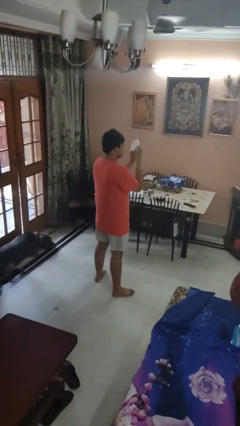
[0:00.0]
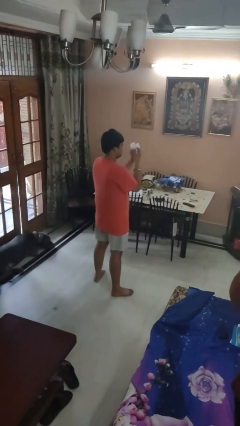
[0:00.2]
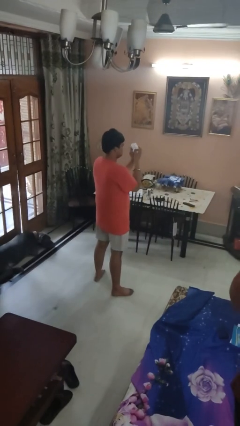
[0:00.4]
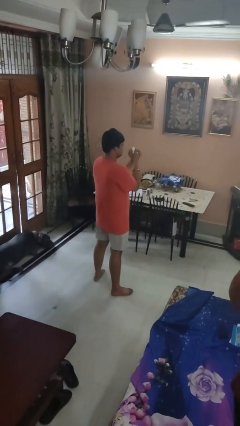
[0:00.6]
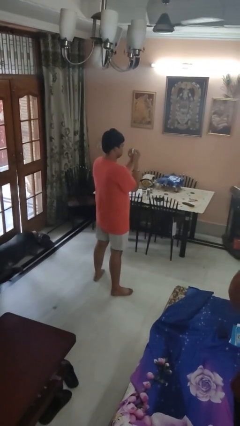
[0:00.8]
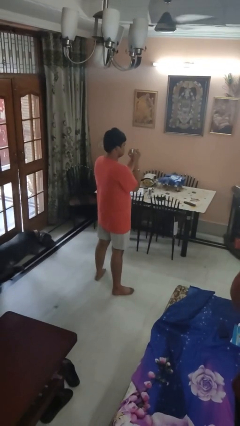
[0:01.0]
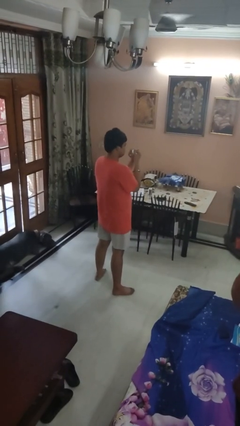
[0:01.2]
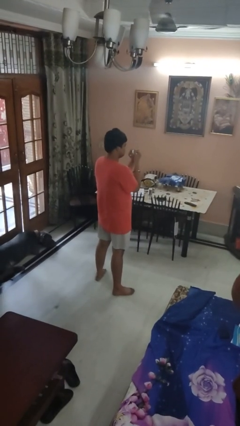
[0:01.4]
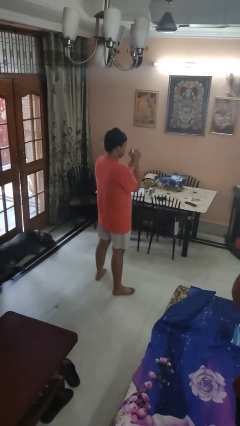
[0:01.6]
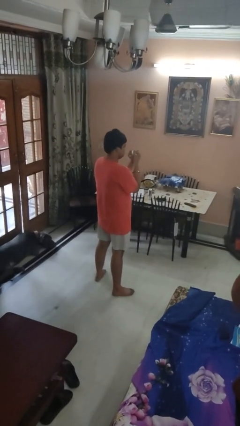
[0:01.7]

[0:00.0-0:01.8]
person crumples paper

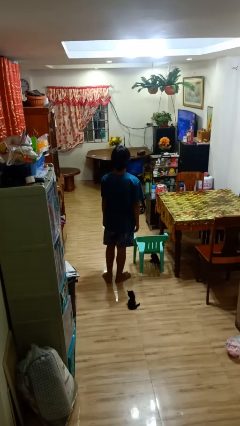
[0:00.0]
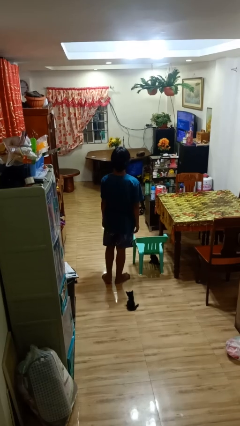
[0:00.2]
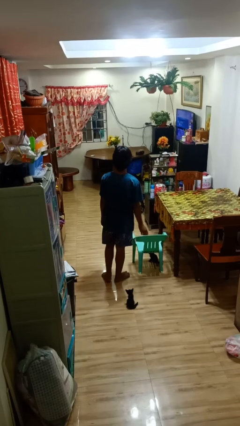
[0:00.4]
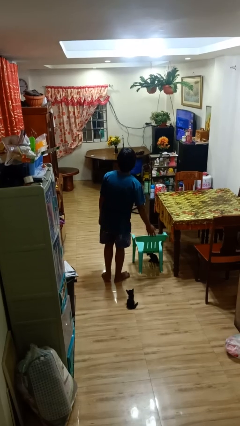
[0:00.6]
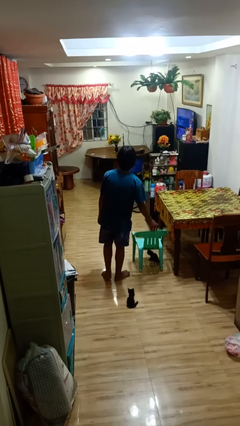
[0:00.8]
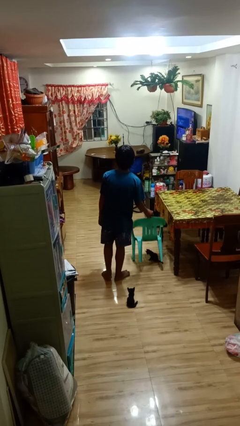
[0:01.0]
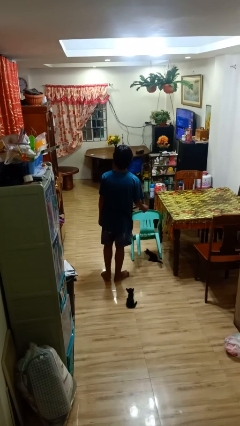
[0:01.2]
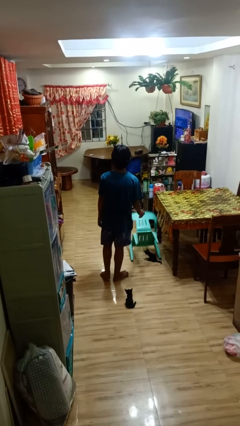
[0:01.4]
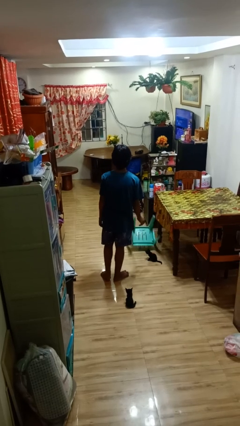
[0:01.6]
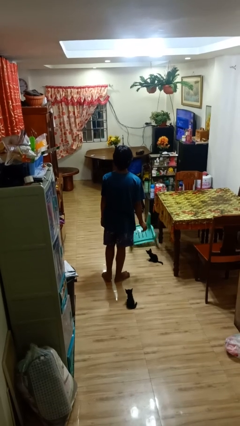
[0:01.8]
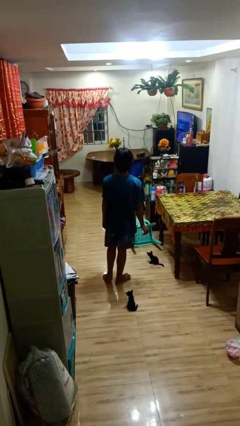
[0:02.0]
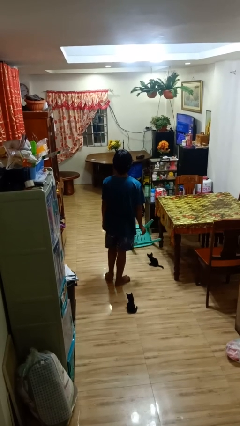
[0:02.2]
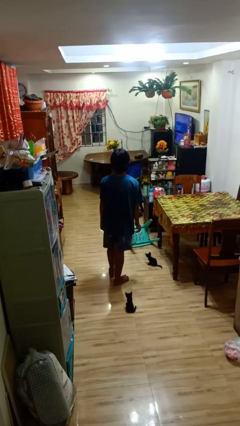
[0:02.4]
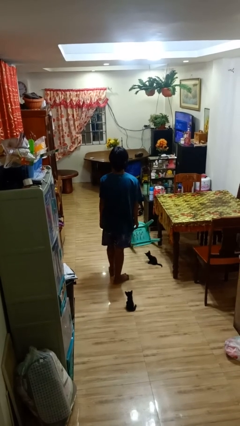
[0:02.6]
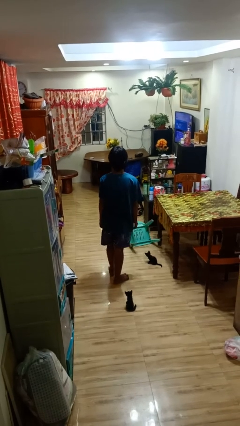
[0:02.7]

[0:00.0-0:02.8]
person knocks over furniture

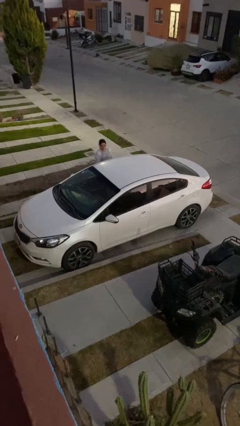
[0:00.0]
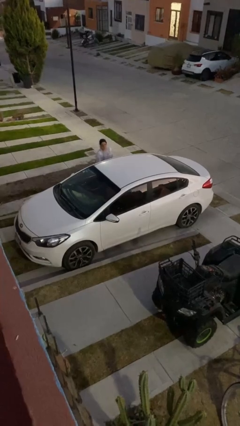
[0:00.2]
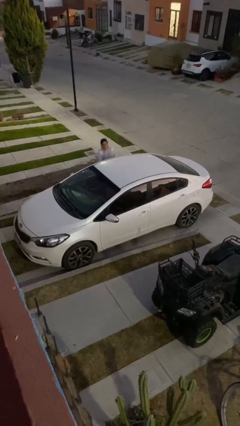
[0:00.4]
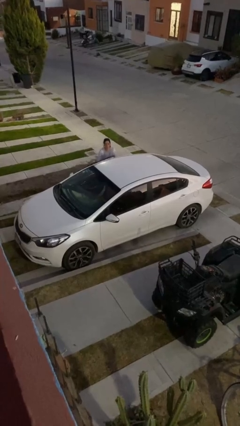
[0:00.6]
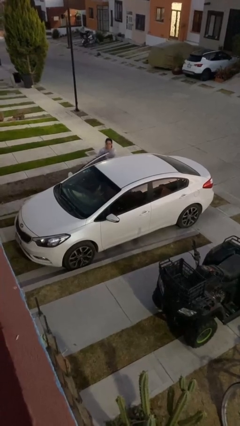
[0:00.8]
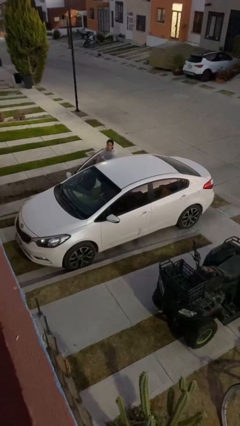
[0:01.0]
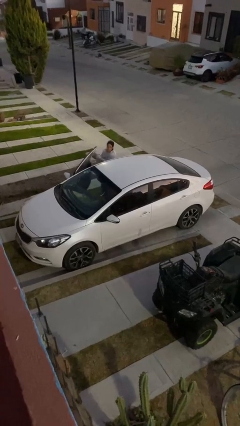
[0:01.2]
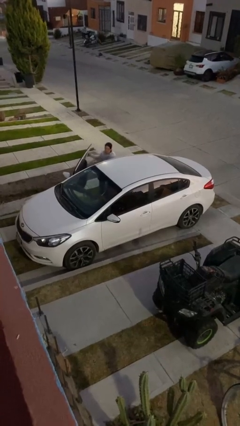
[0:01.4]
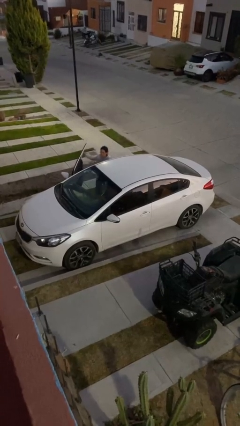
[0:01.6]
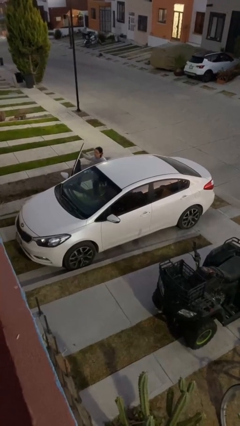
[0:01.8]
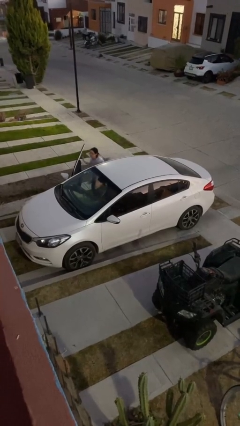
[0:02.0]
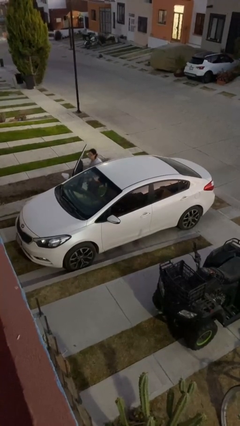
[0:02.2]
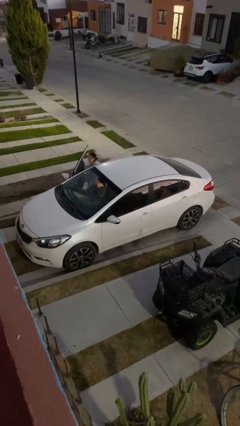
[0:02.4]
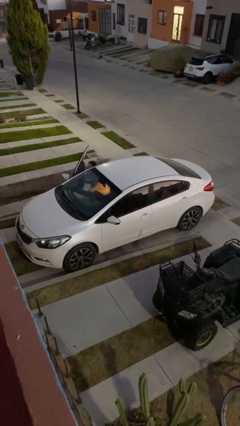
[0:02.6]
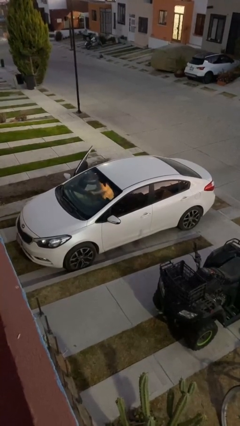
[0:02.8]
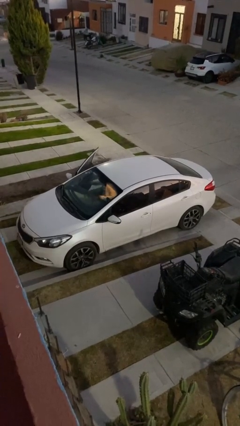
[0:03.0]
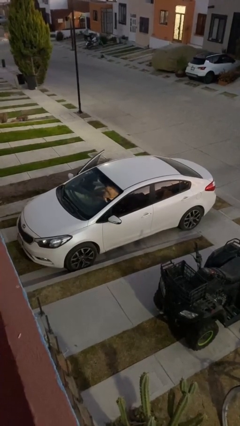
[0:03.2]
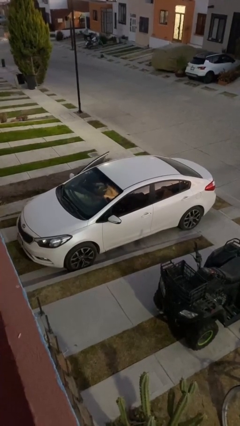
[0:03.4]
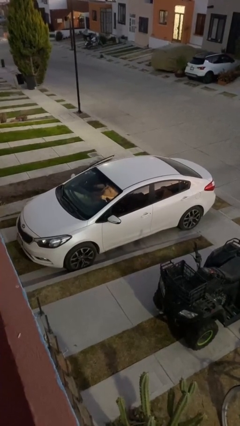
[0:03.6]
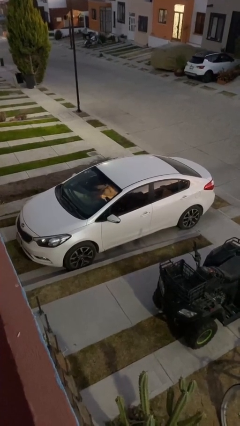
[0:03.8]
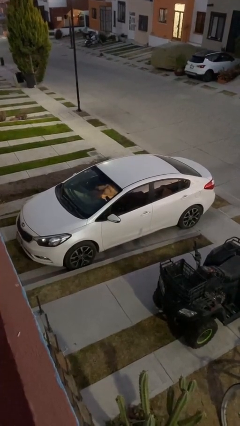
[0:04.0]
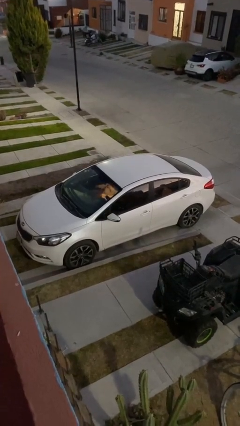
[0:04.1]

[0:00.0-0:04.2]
car picks up person

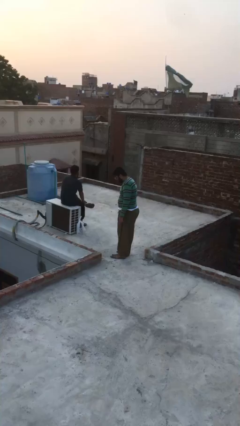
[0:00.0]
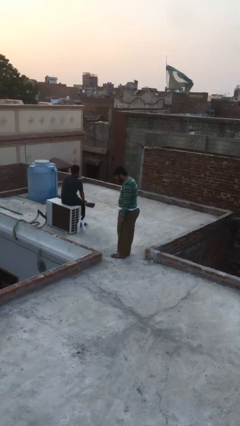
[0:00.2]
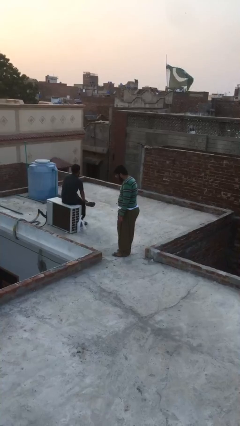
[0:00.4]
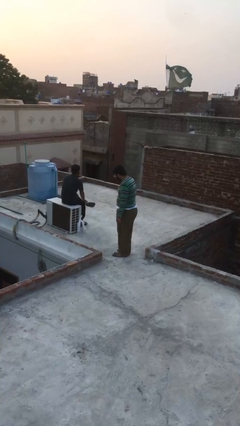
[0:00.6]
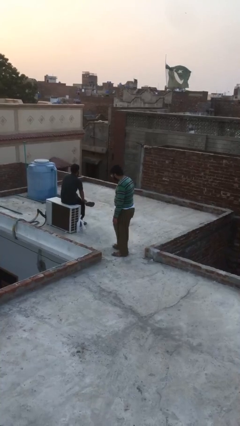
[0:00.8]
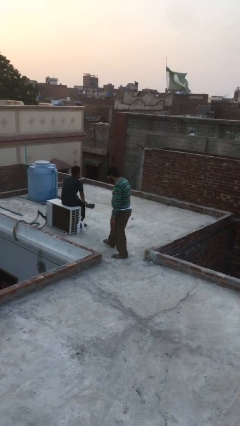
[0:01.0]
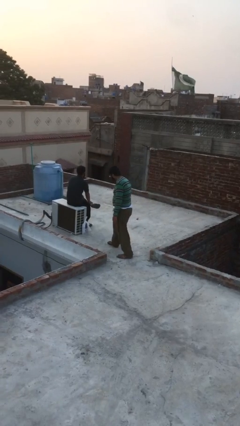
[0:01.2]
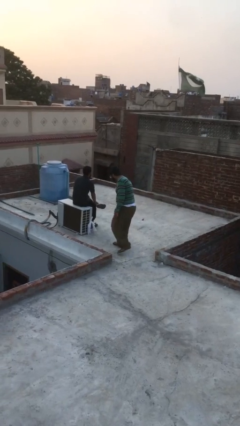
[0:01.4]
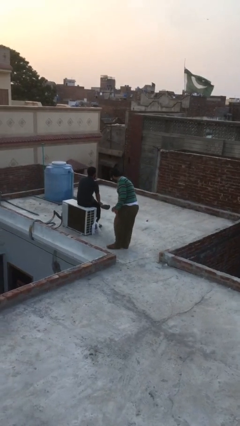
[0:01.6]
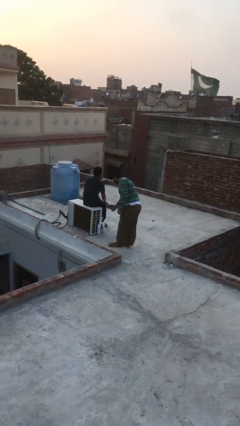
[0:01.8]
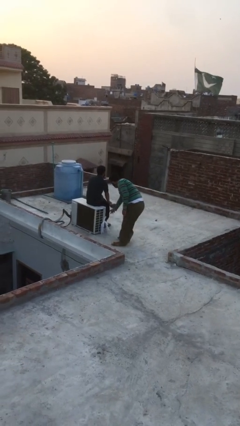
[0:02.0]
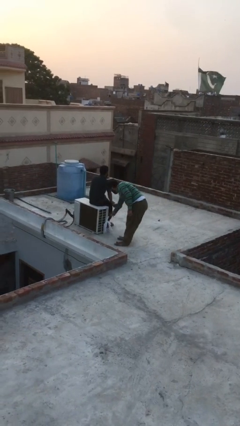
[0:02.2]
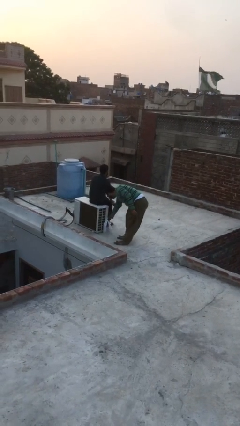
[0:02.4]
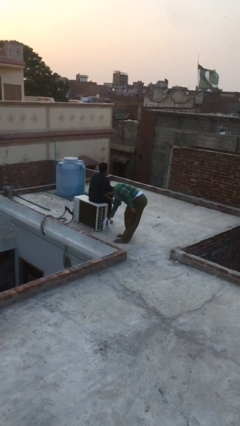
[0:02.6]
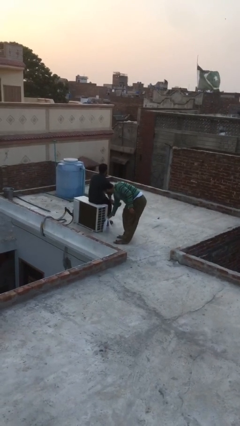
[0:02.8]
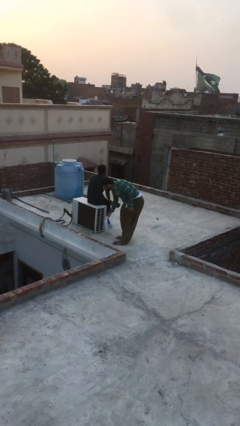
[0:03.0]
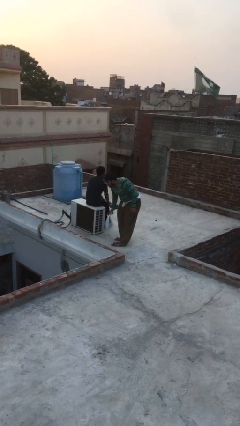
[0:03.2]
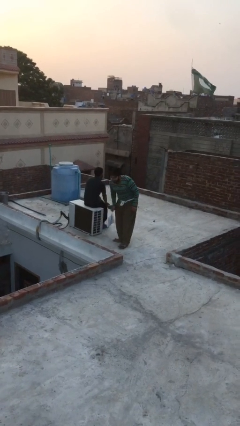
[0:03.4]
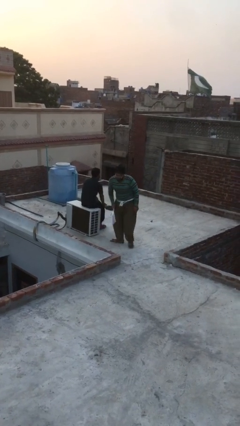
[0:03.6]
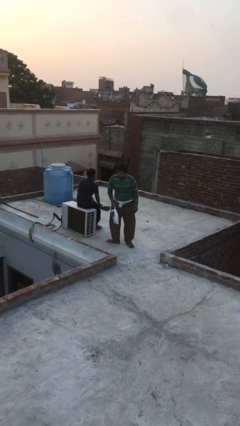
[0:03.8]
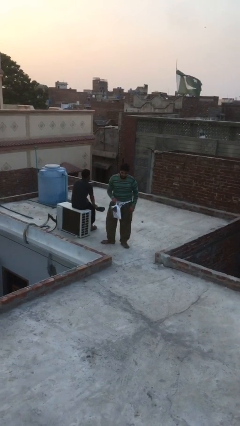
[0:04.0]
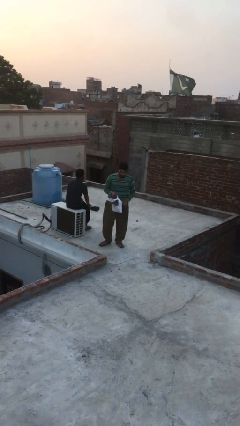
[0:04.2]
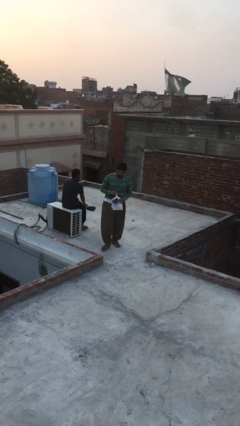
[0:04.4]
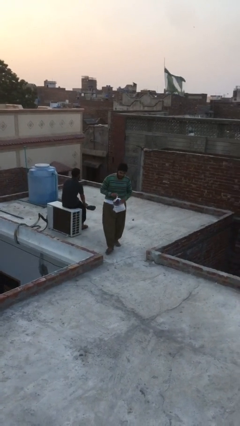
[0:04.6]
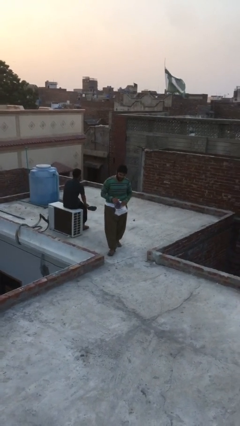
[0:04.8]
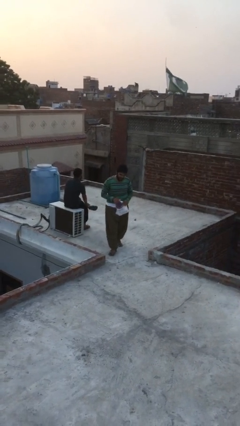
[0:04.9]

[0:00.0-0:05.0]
person steals object from person

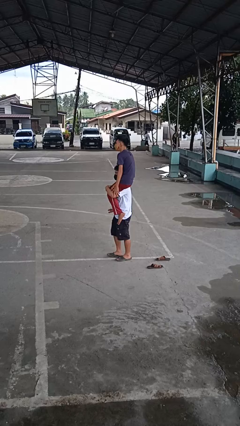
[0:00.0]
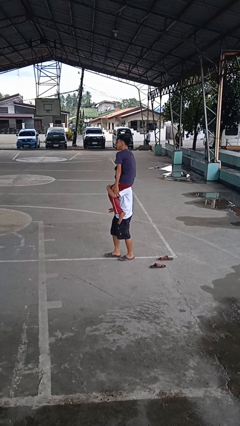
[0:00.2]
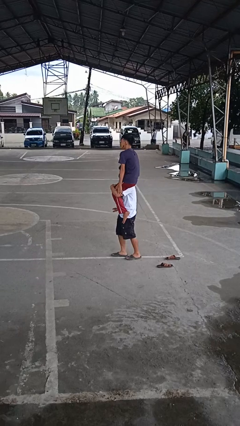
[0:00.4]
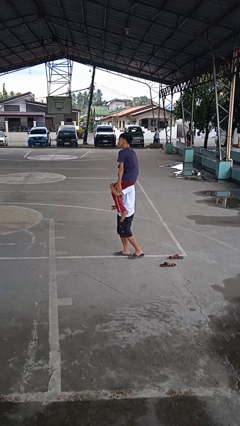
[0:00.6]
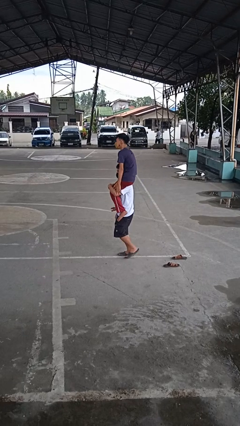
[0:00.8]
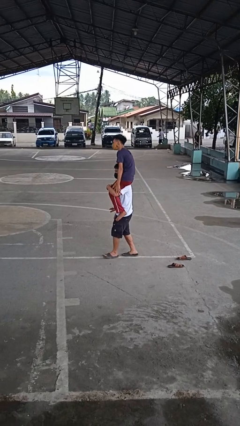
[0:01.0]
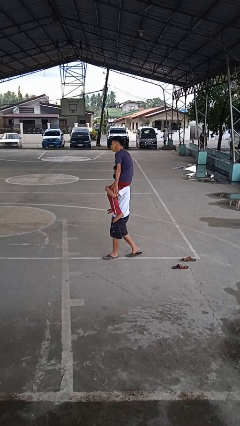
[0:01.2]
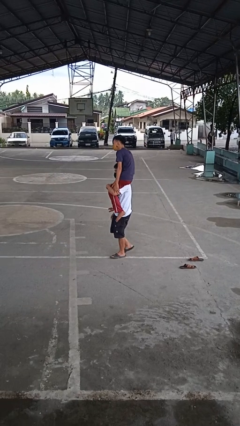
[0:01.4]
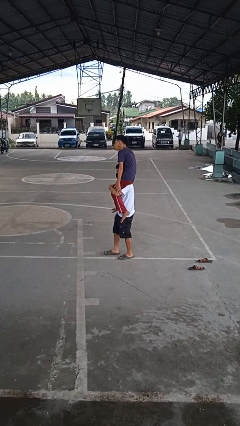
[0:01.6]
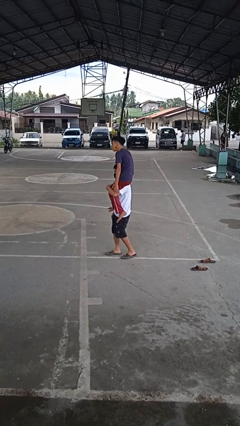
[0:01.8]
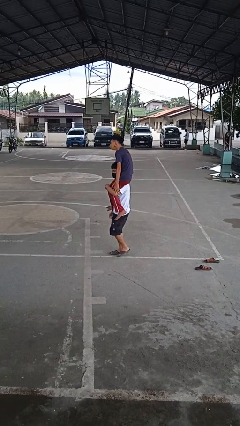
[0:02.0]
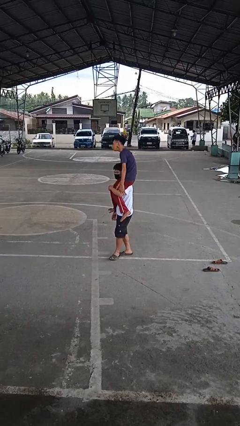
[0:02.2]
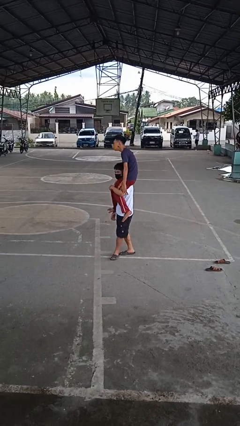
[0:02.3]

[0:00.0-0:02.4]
person carries person on shoulders

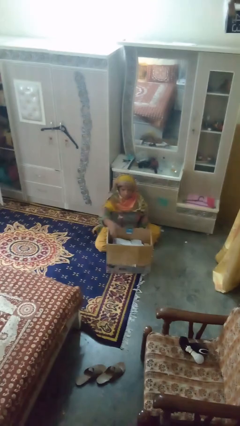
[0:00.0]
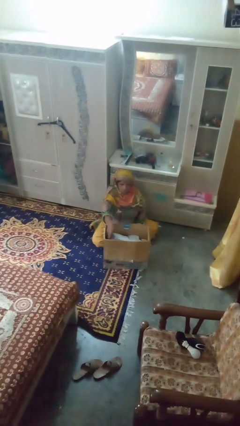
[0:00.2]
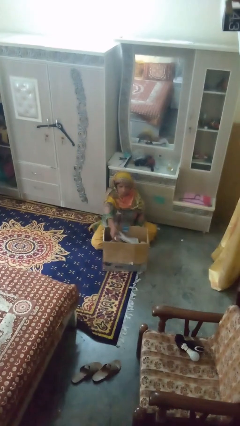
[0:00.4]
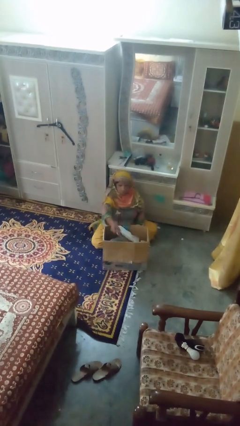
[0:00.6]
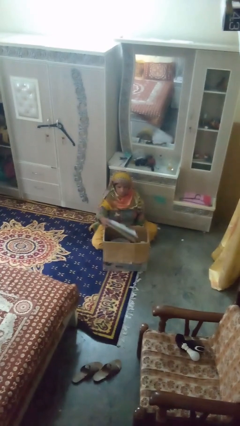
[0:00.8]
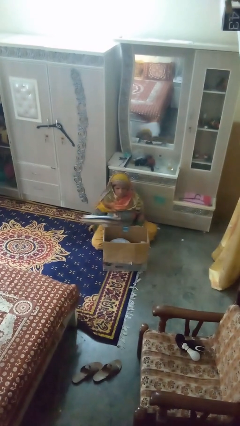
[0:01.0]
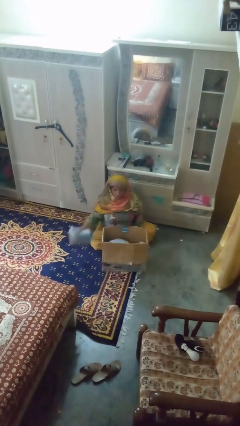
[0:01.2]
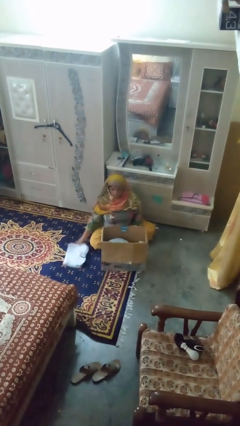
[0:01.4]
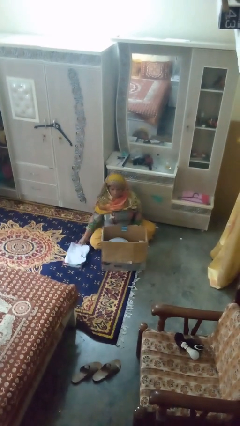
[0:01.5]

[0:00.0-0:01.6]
person takes object from box
